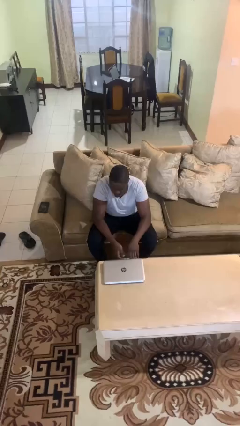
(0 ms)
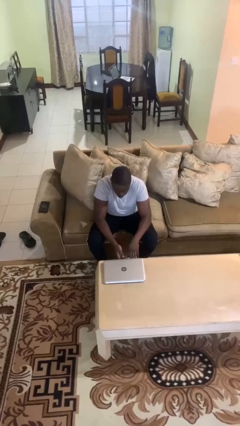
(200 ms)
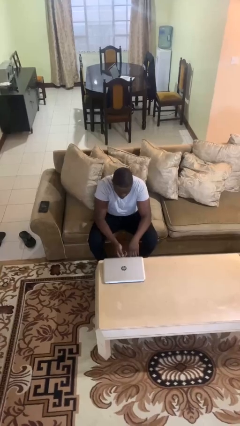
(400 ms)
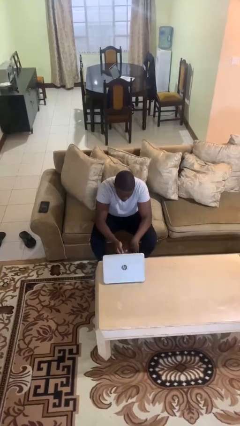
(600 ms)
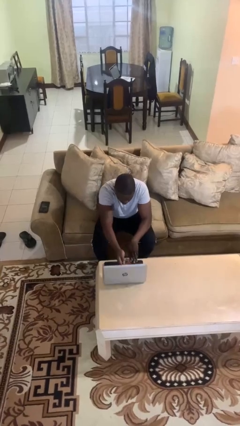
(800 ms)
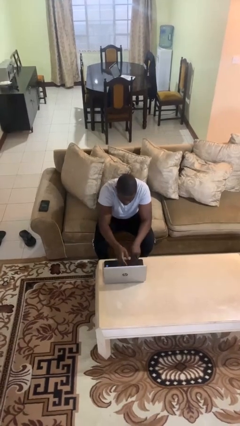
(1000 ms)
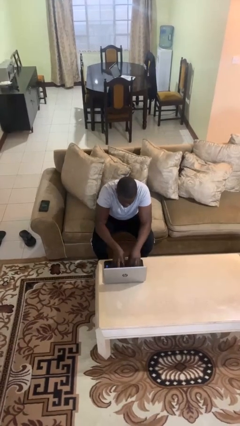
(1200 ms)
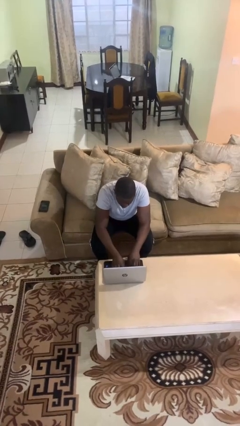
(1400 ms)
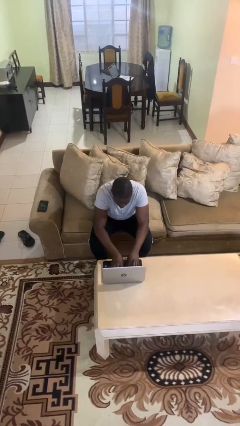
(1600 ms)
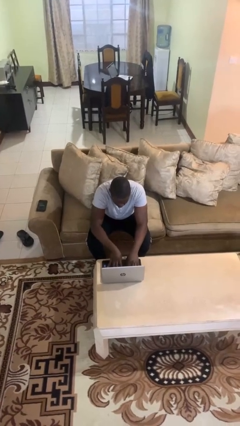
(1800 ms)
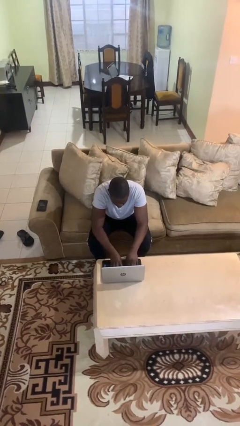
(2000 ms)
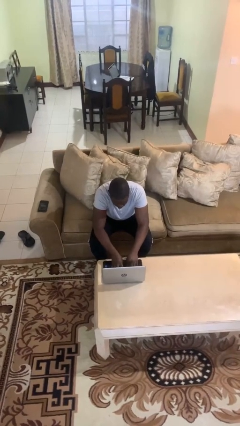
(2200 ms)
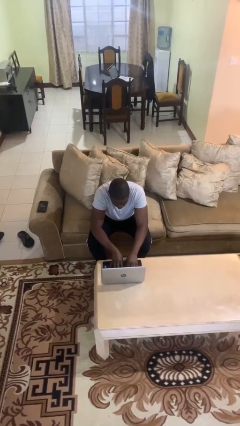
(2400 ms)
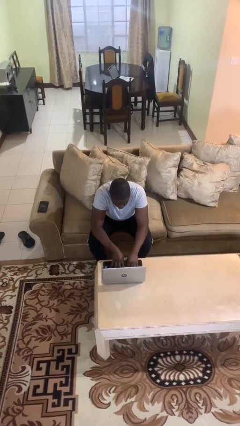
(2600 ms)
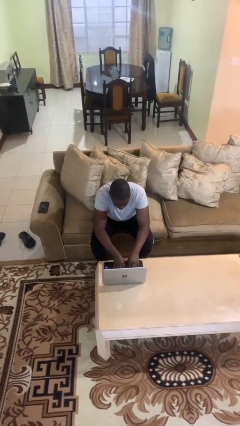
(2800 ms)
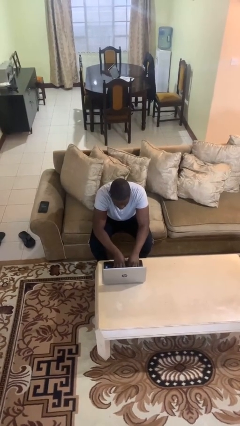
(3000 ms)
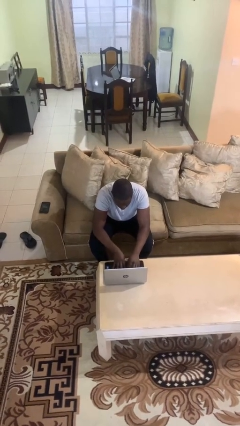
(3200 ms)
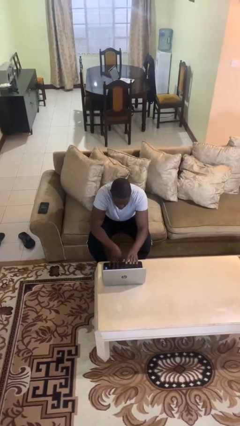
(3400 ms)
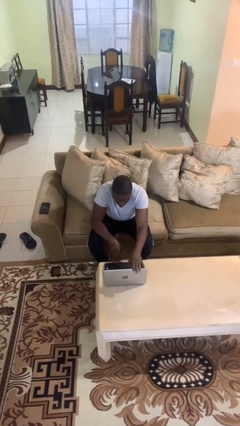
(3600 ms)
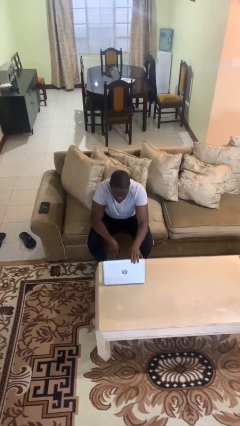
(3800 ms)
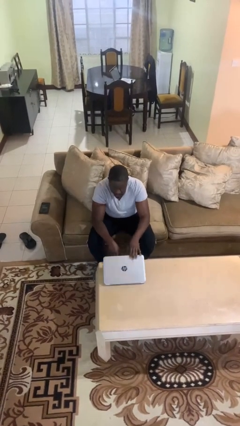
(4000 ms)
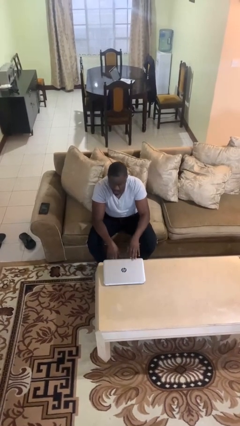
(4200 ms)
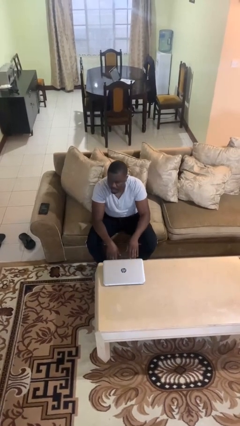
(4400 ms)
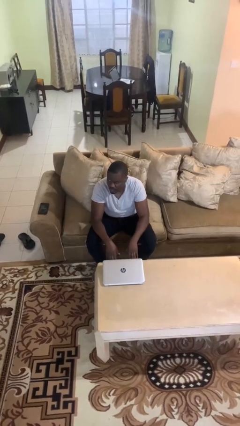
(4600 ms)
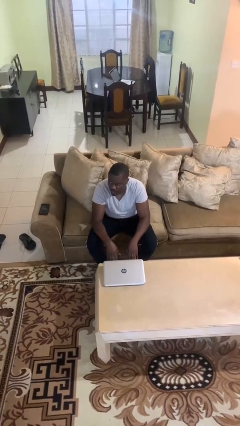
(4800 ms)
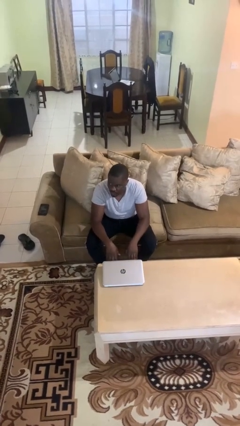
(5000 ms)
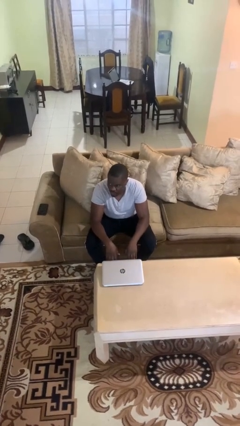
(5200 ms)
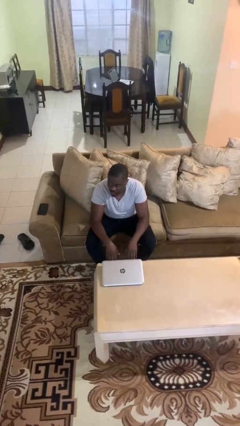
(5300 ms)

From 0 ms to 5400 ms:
person interacts with laptop

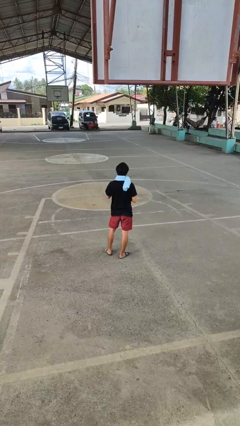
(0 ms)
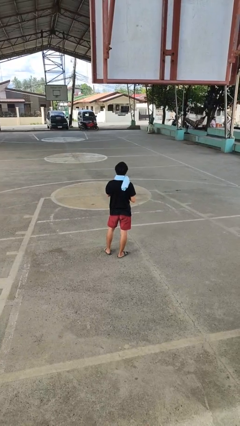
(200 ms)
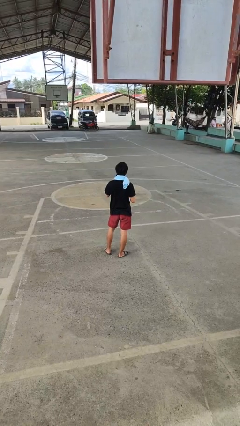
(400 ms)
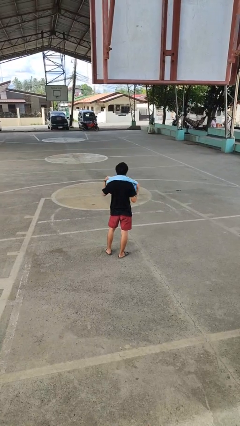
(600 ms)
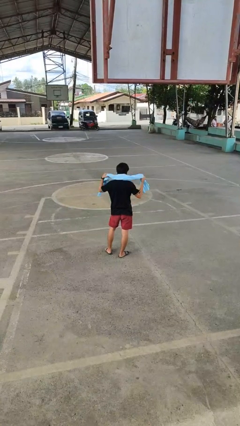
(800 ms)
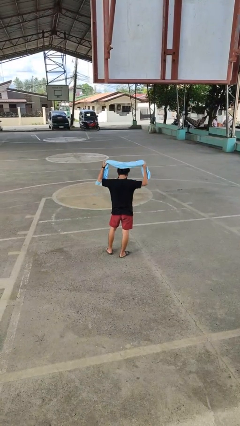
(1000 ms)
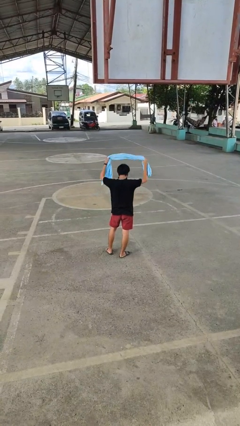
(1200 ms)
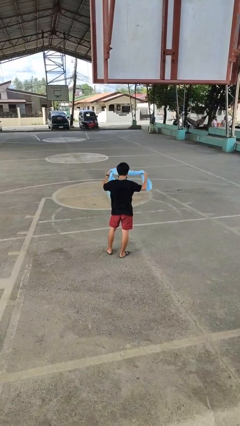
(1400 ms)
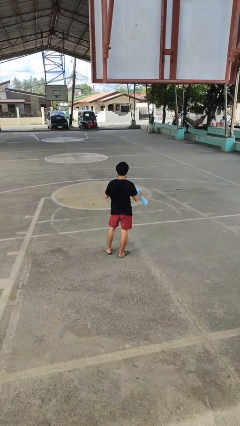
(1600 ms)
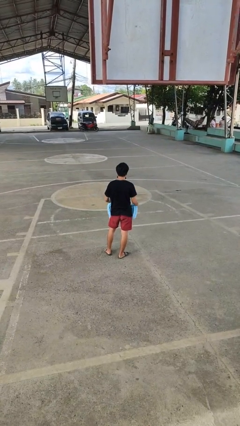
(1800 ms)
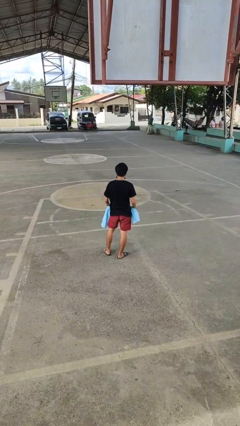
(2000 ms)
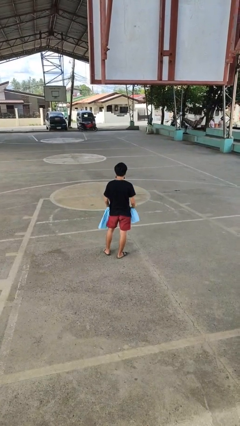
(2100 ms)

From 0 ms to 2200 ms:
person takes off scarf

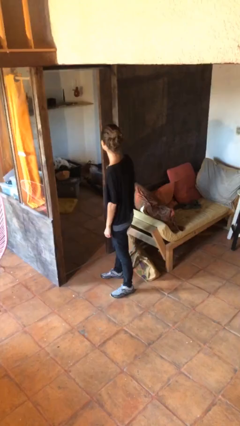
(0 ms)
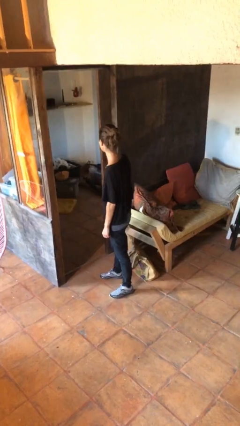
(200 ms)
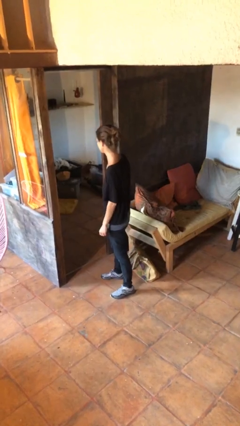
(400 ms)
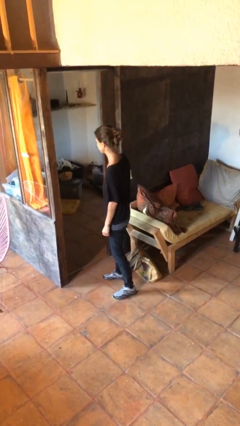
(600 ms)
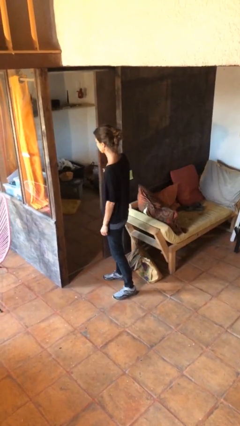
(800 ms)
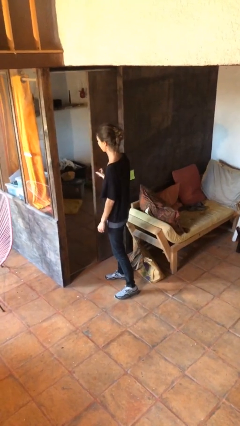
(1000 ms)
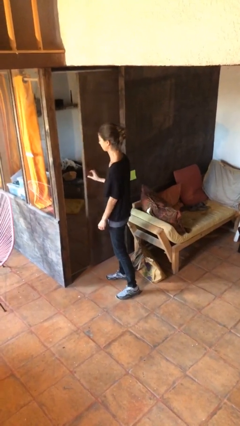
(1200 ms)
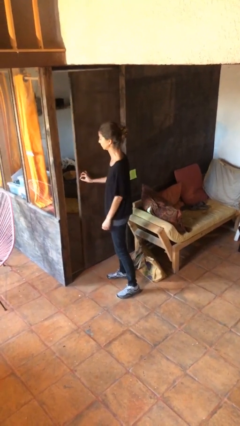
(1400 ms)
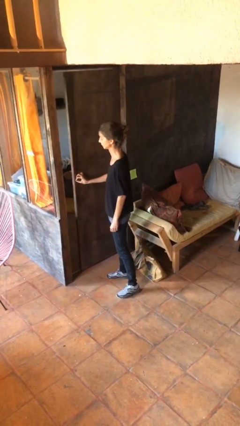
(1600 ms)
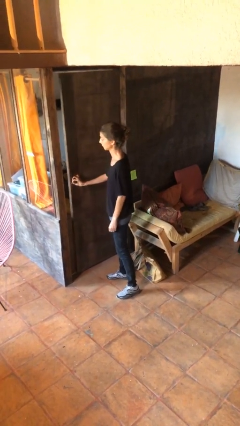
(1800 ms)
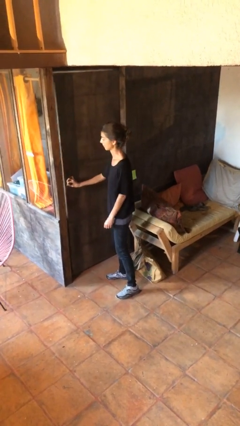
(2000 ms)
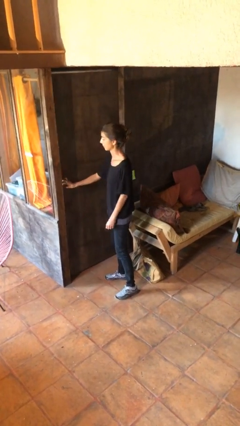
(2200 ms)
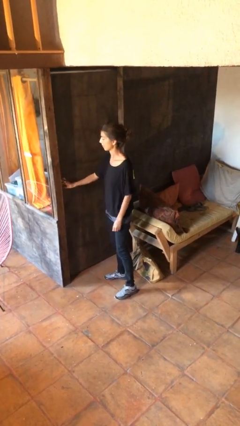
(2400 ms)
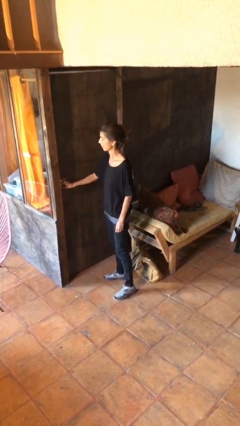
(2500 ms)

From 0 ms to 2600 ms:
person closes facility door

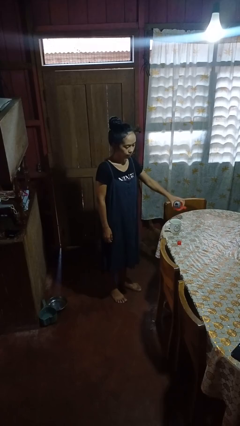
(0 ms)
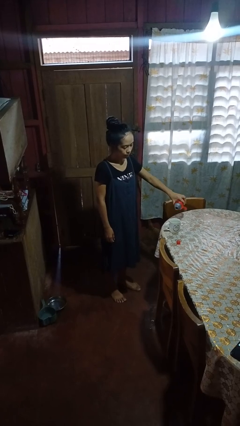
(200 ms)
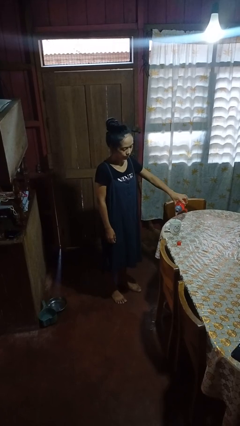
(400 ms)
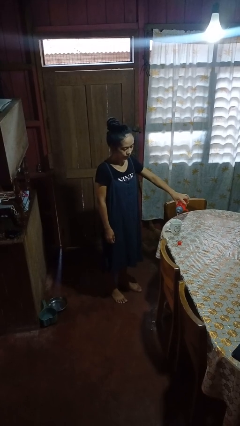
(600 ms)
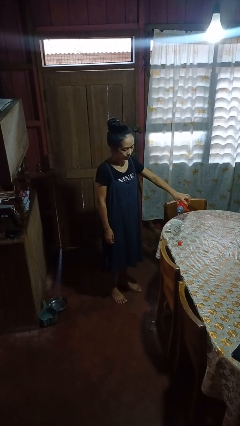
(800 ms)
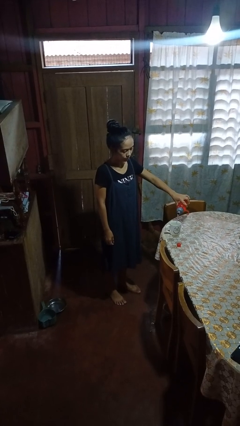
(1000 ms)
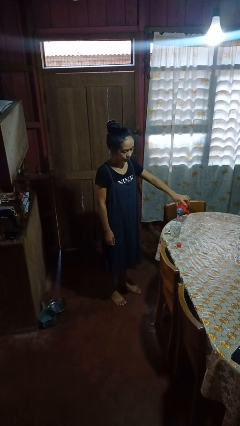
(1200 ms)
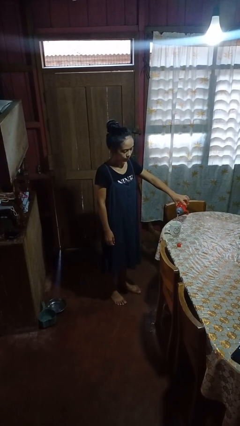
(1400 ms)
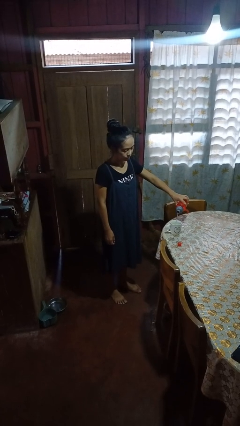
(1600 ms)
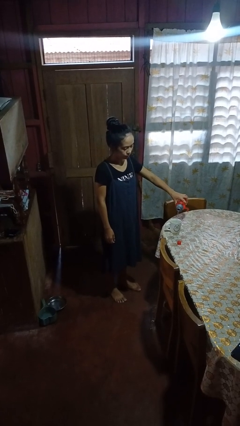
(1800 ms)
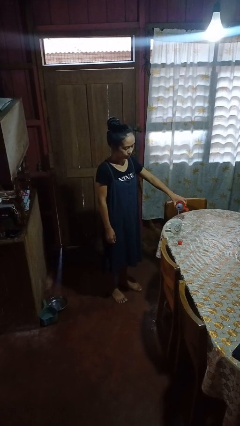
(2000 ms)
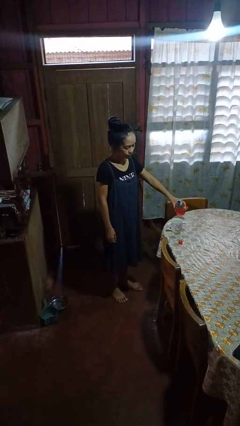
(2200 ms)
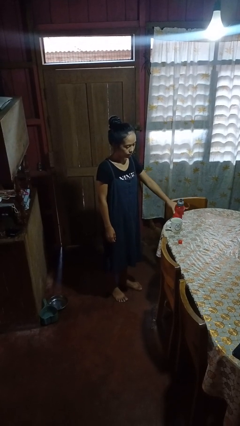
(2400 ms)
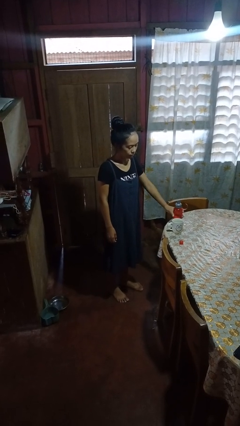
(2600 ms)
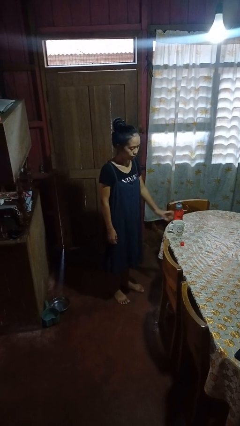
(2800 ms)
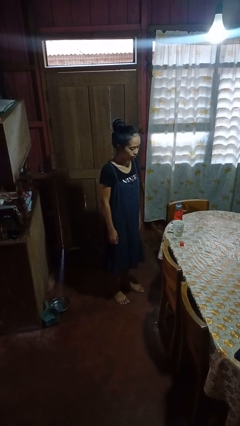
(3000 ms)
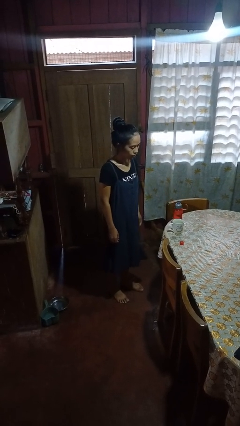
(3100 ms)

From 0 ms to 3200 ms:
person pours liquid into cup

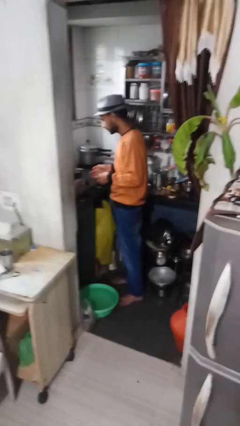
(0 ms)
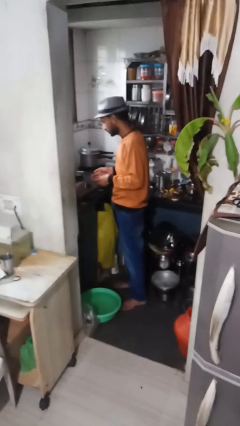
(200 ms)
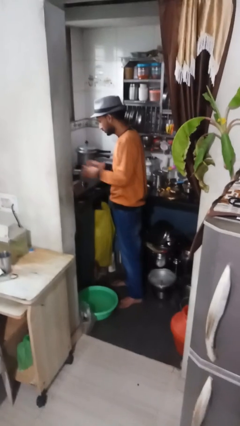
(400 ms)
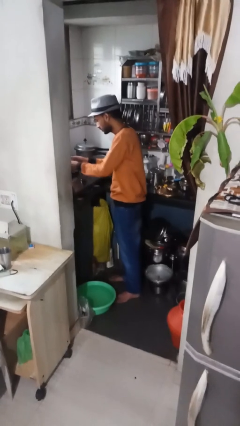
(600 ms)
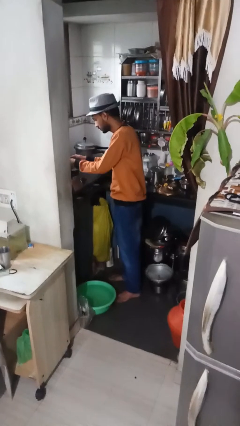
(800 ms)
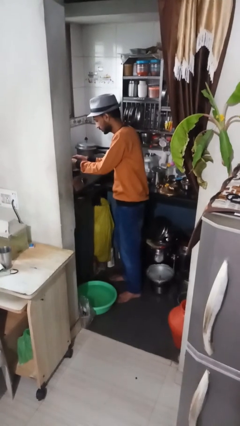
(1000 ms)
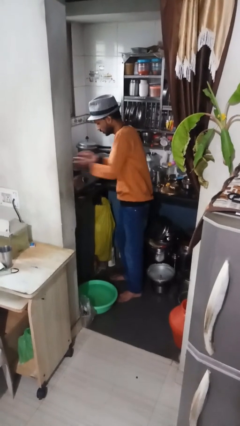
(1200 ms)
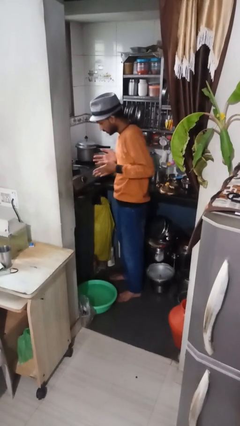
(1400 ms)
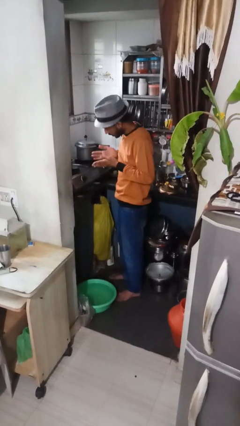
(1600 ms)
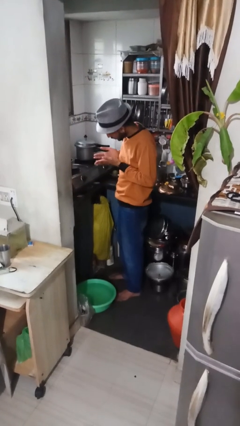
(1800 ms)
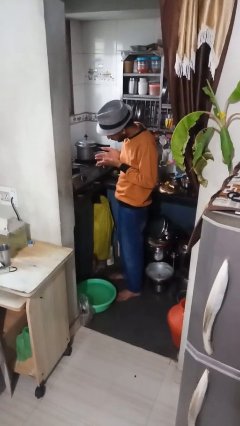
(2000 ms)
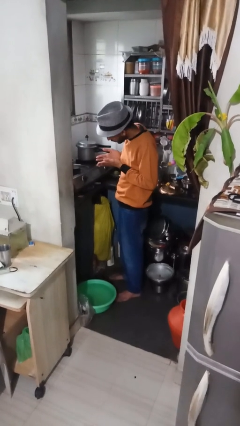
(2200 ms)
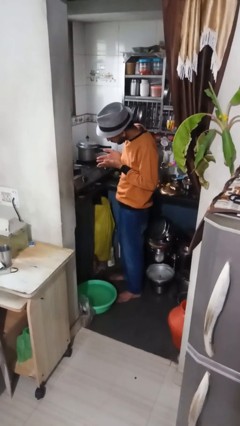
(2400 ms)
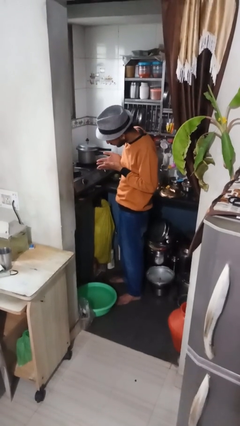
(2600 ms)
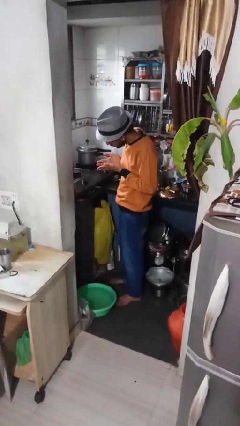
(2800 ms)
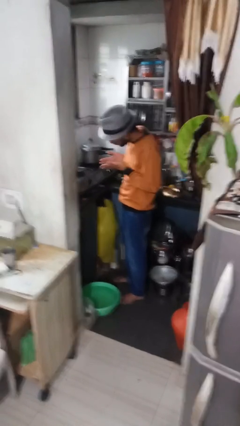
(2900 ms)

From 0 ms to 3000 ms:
person burns hand

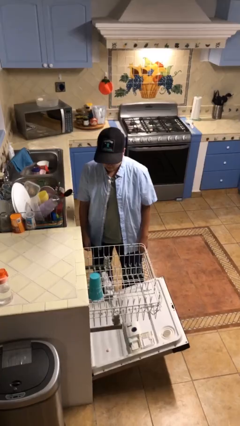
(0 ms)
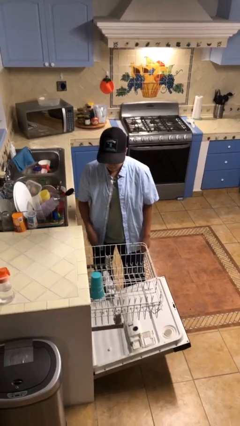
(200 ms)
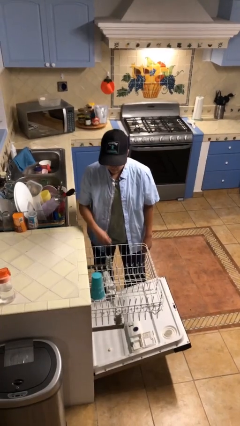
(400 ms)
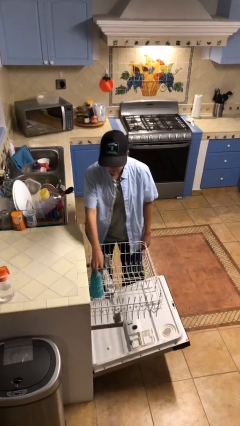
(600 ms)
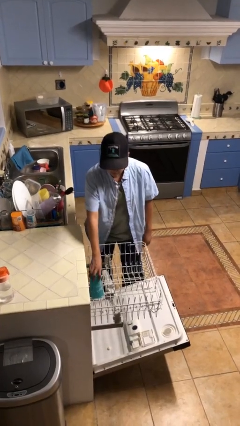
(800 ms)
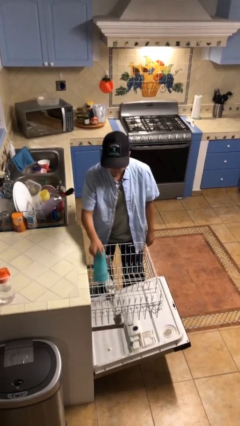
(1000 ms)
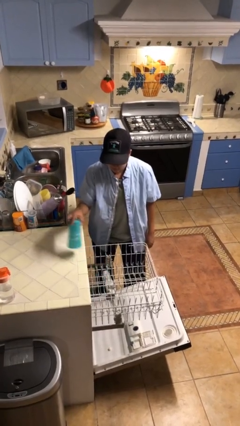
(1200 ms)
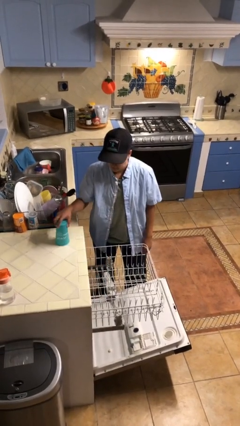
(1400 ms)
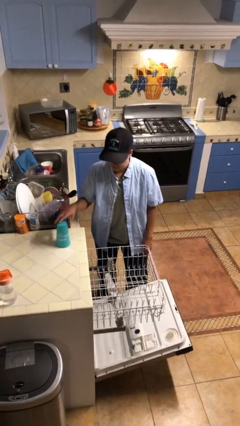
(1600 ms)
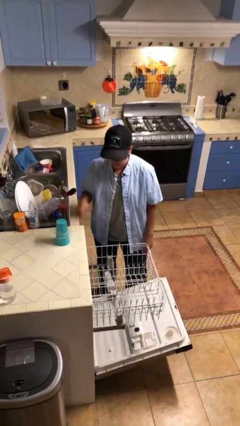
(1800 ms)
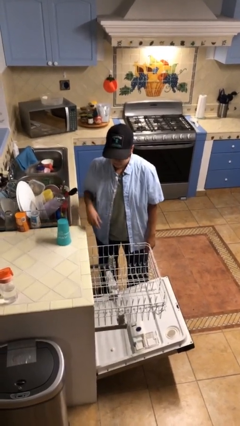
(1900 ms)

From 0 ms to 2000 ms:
person unloads dishwasher
